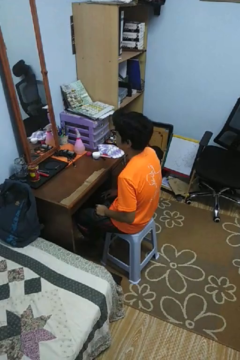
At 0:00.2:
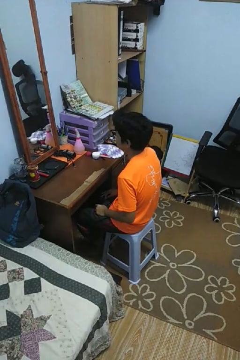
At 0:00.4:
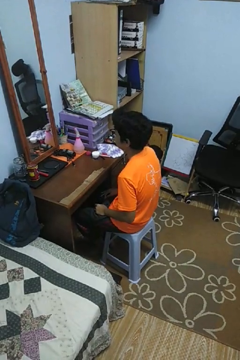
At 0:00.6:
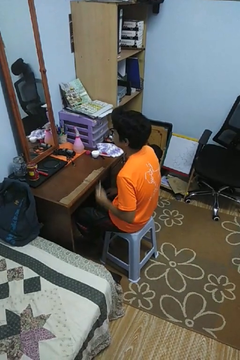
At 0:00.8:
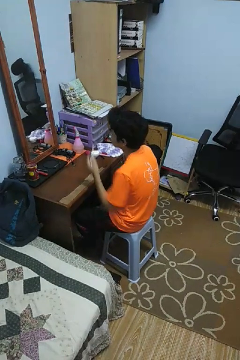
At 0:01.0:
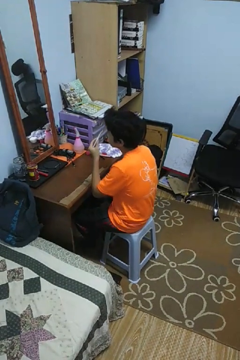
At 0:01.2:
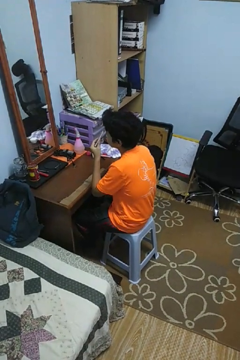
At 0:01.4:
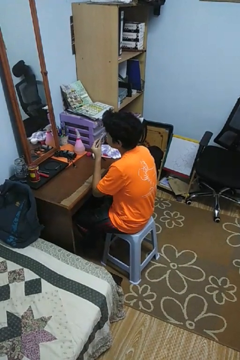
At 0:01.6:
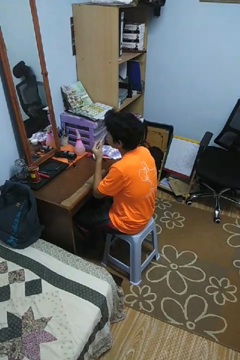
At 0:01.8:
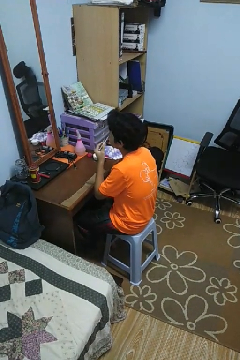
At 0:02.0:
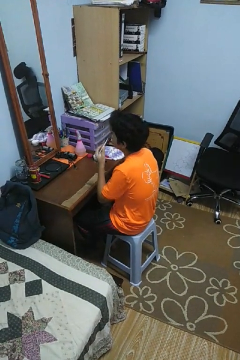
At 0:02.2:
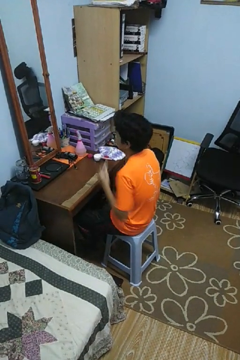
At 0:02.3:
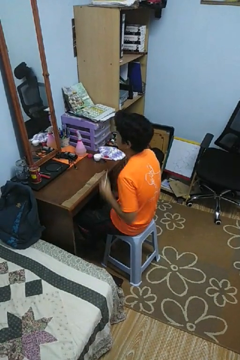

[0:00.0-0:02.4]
person applies eye makeup

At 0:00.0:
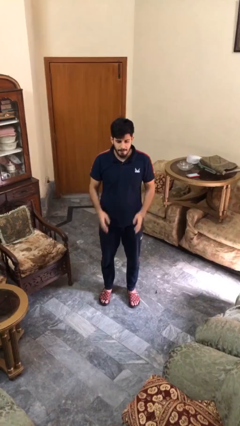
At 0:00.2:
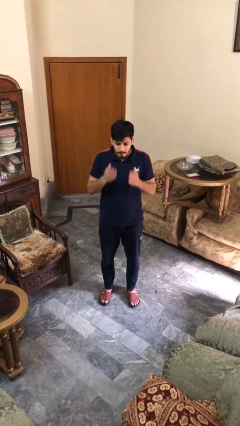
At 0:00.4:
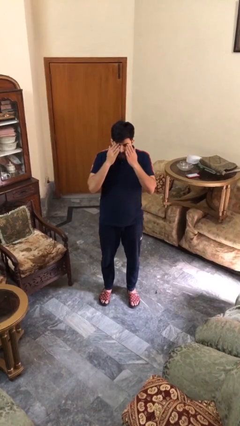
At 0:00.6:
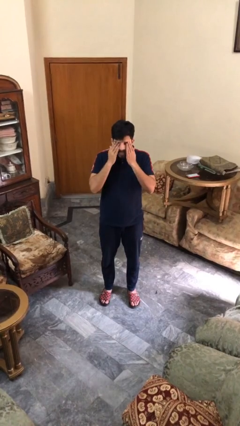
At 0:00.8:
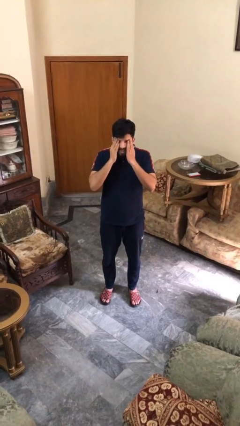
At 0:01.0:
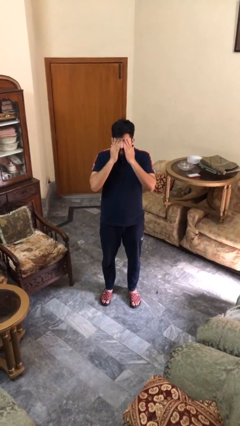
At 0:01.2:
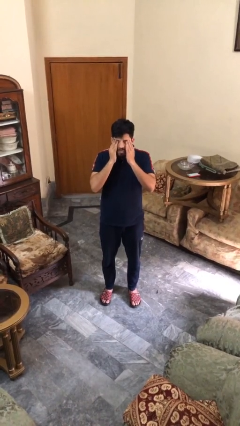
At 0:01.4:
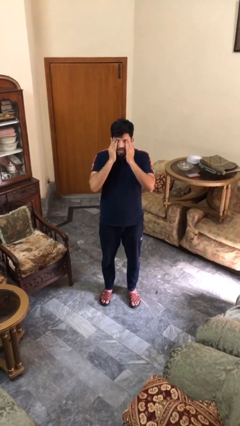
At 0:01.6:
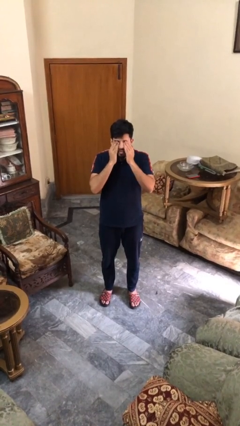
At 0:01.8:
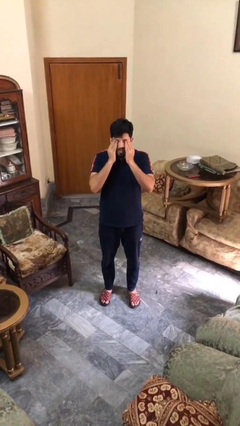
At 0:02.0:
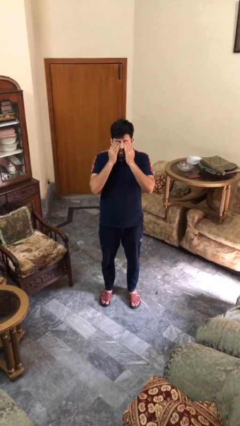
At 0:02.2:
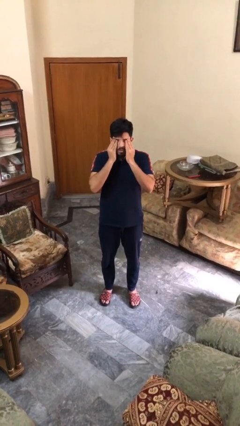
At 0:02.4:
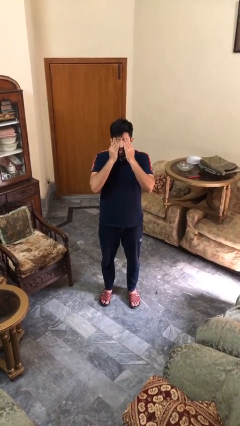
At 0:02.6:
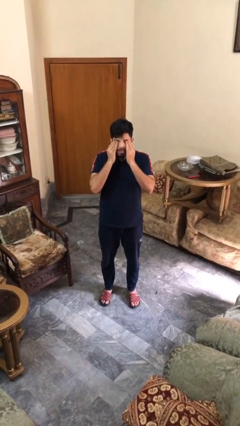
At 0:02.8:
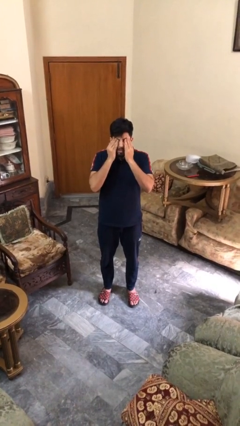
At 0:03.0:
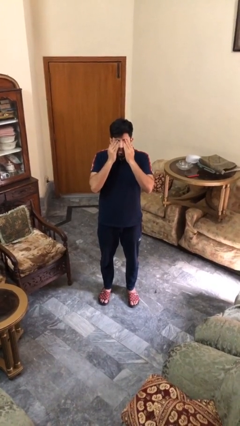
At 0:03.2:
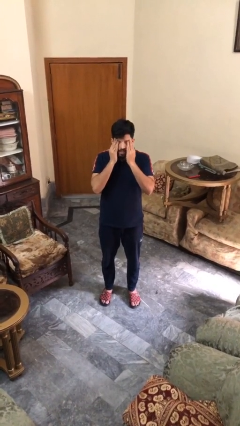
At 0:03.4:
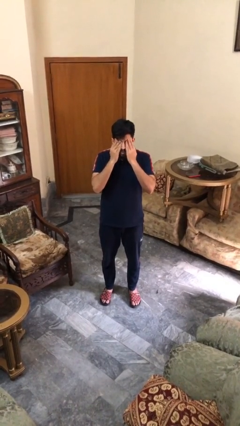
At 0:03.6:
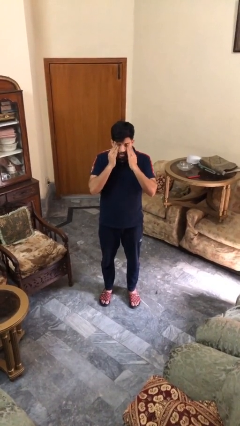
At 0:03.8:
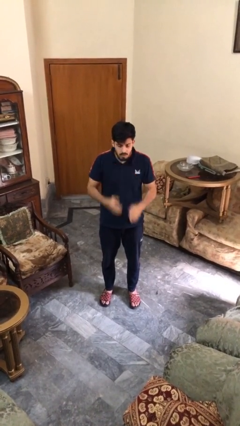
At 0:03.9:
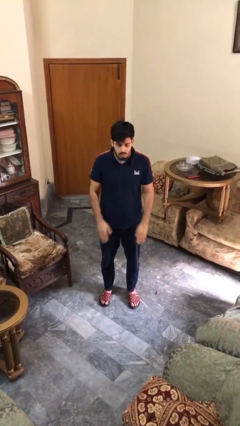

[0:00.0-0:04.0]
person rubs eyes

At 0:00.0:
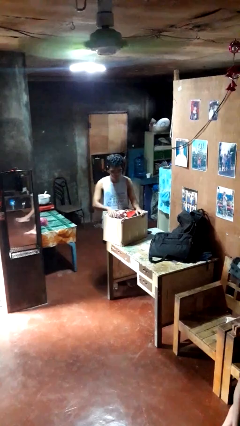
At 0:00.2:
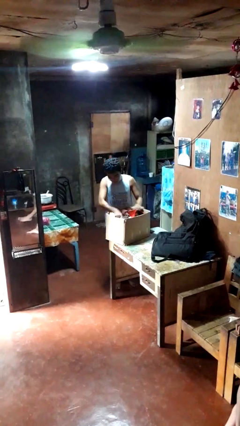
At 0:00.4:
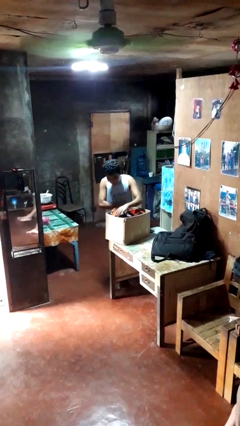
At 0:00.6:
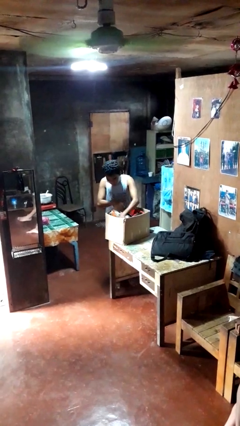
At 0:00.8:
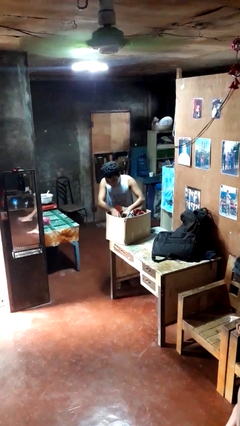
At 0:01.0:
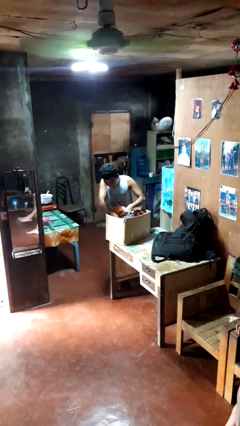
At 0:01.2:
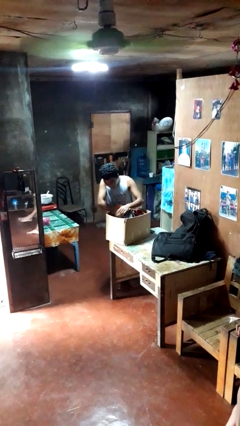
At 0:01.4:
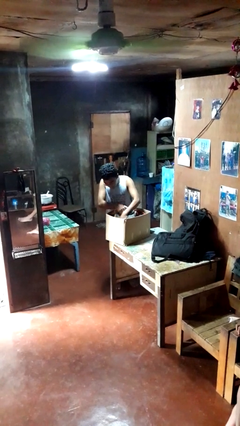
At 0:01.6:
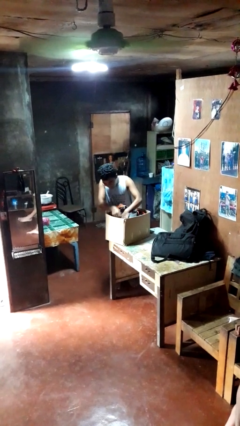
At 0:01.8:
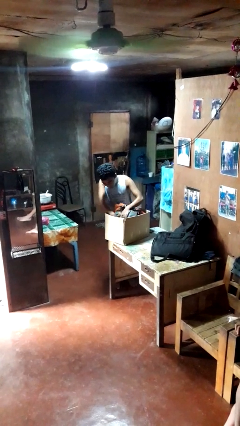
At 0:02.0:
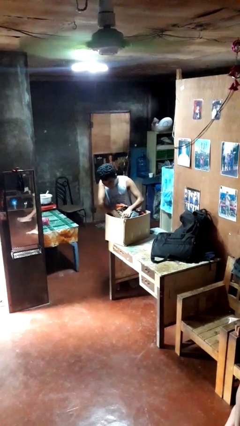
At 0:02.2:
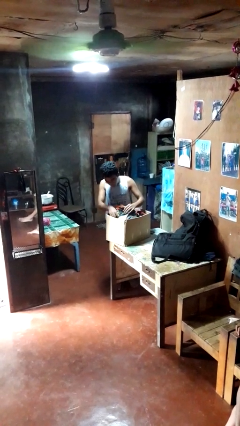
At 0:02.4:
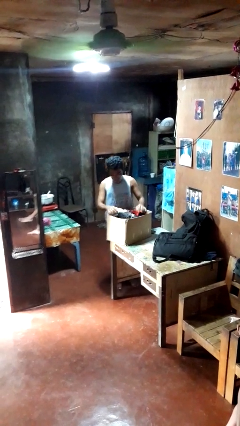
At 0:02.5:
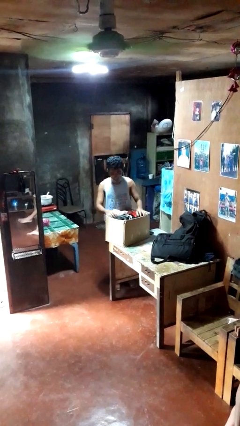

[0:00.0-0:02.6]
person searches in box

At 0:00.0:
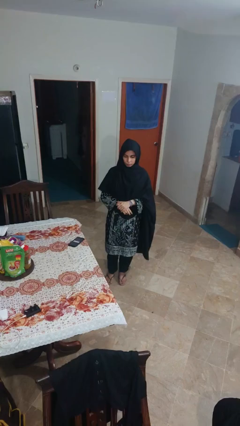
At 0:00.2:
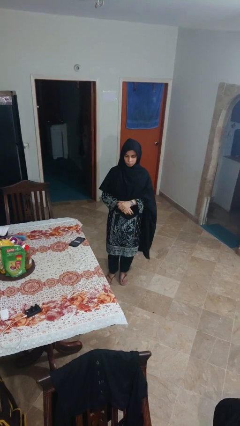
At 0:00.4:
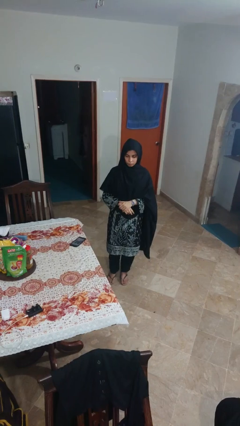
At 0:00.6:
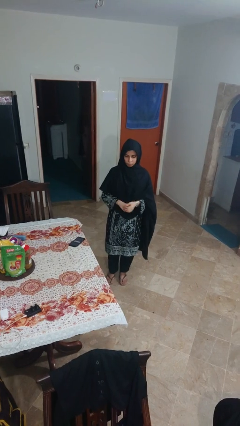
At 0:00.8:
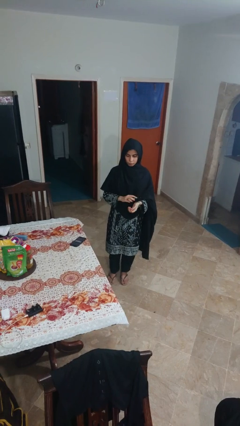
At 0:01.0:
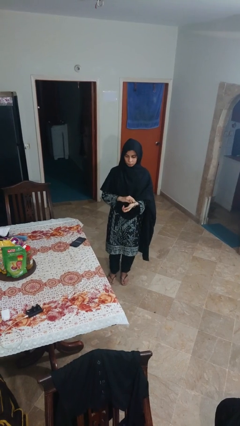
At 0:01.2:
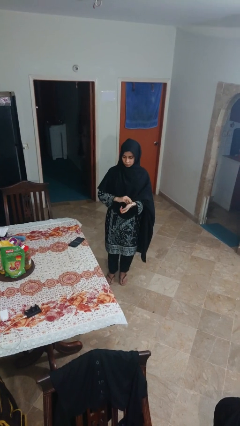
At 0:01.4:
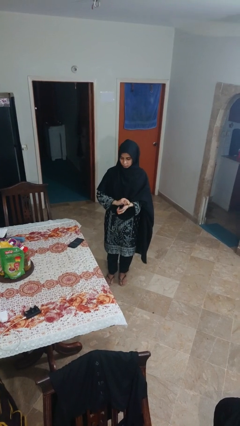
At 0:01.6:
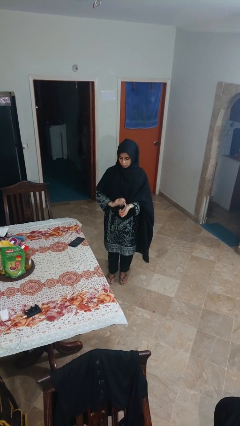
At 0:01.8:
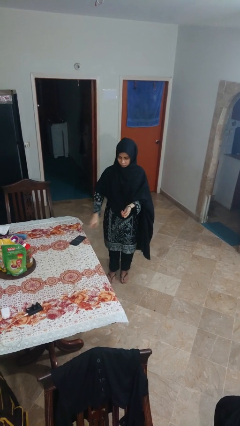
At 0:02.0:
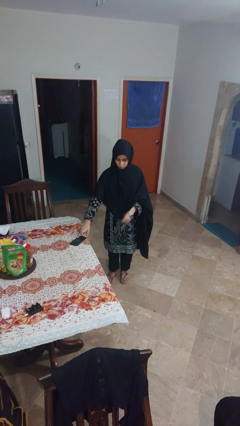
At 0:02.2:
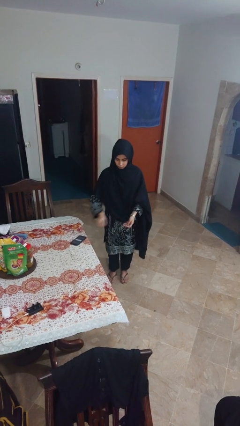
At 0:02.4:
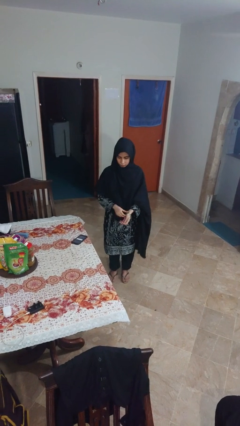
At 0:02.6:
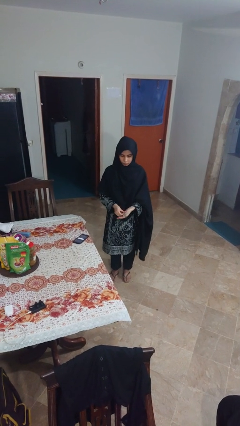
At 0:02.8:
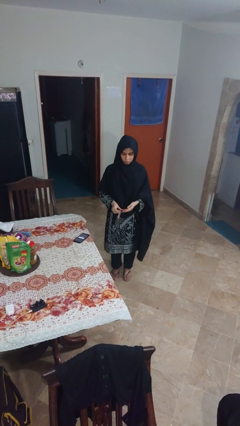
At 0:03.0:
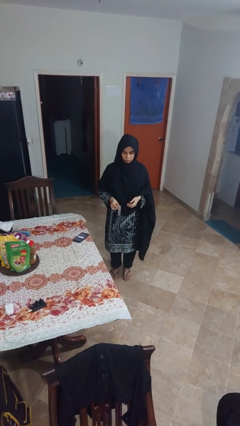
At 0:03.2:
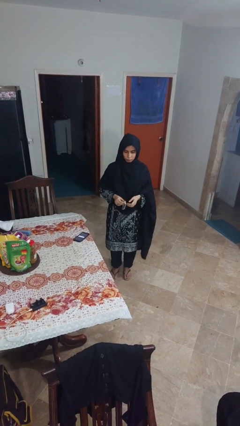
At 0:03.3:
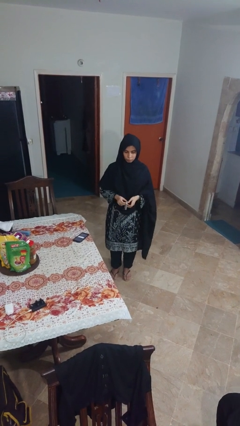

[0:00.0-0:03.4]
person takes off wristwatch

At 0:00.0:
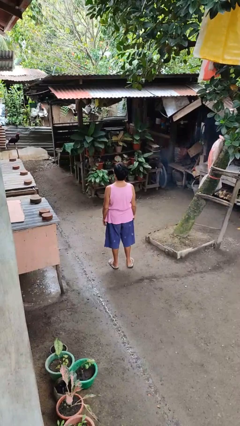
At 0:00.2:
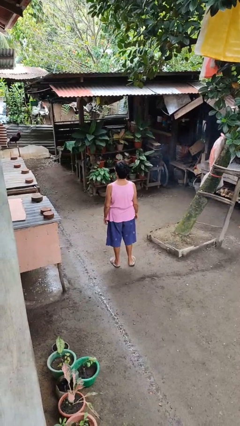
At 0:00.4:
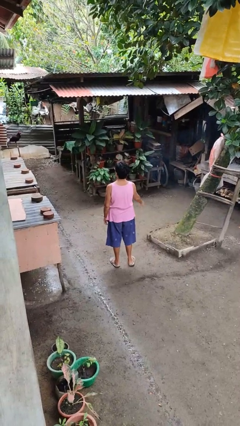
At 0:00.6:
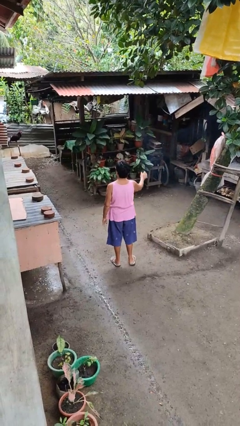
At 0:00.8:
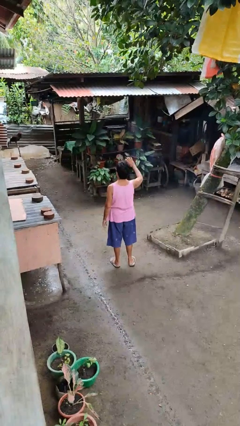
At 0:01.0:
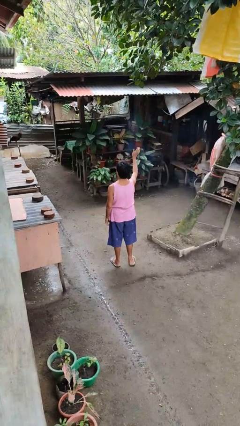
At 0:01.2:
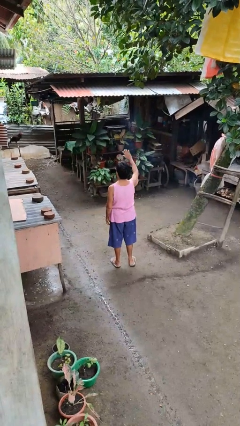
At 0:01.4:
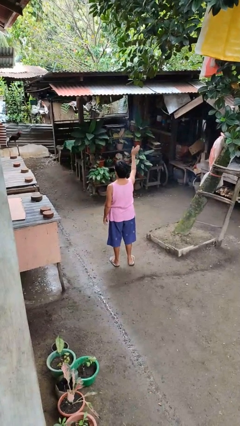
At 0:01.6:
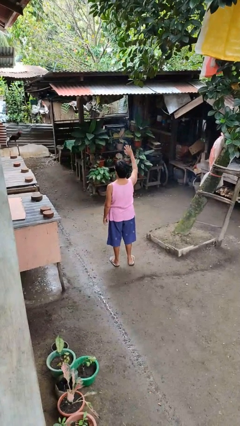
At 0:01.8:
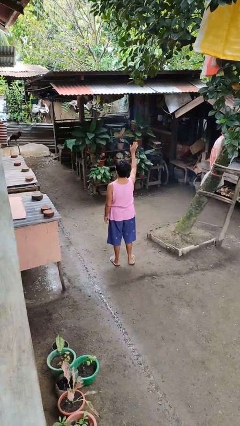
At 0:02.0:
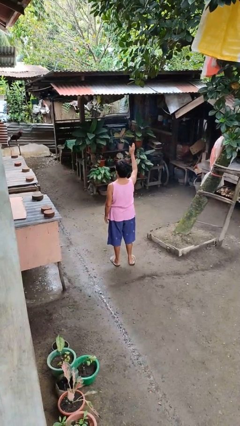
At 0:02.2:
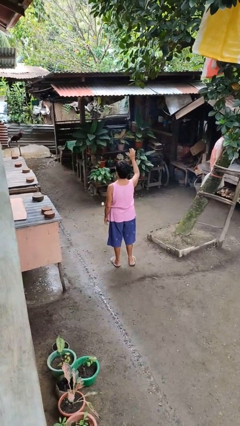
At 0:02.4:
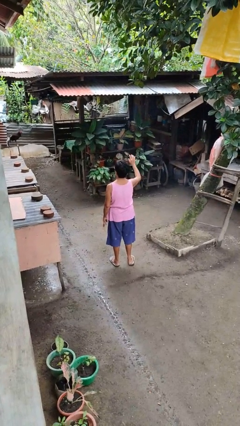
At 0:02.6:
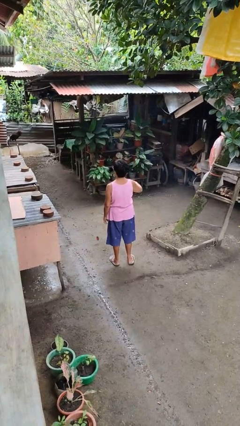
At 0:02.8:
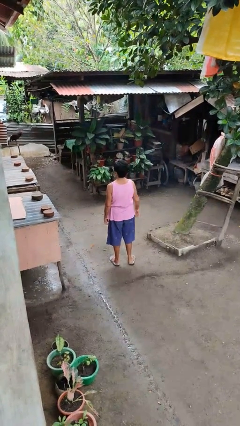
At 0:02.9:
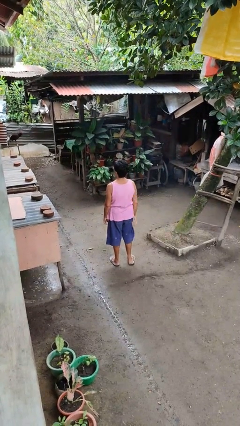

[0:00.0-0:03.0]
person waves at person

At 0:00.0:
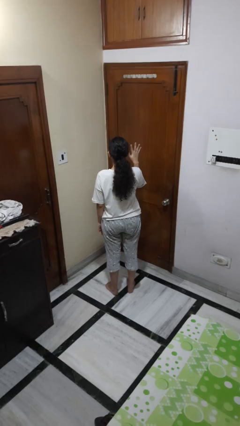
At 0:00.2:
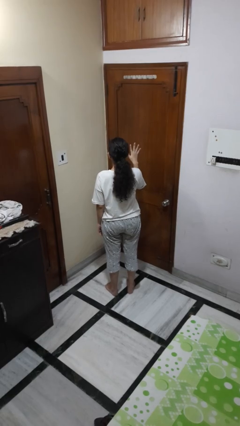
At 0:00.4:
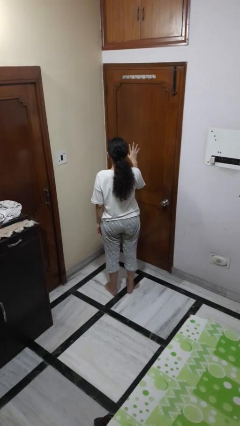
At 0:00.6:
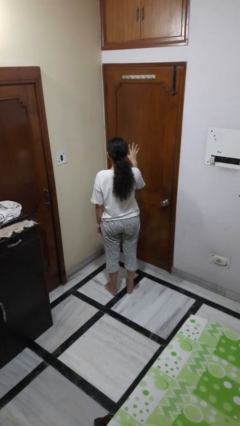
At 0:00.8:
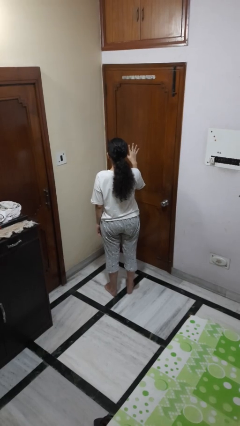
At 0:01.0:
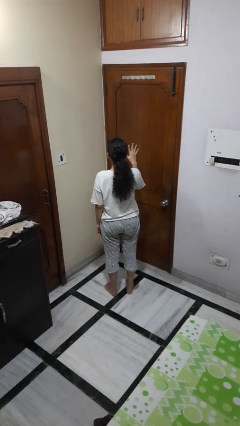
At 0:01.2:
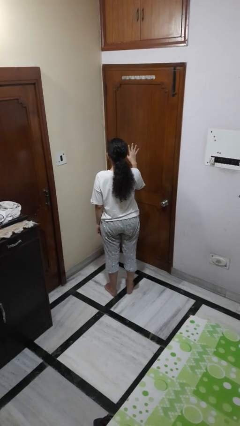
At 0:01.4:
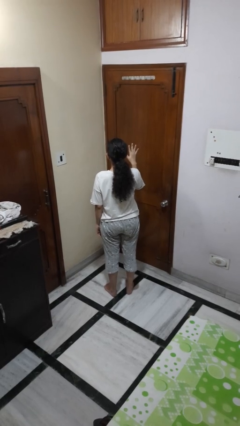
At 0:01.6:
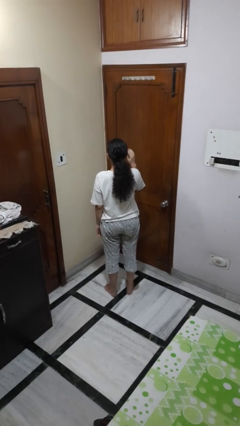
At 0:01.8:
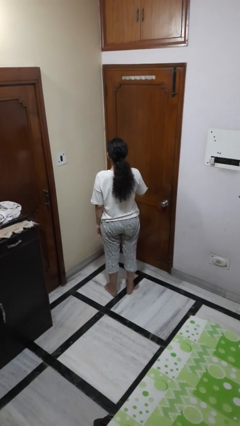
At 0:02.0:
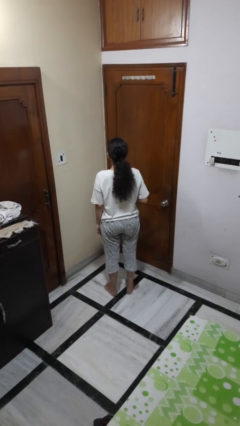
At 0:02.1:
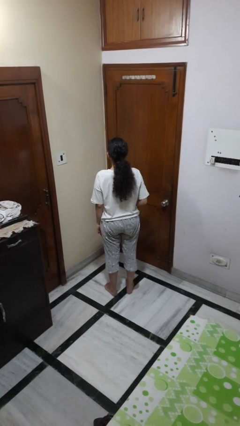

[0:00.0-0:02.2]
person gestures number five
